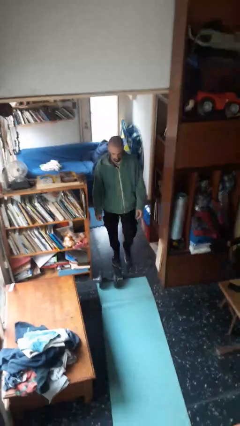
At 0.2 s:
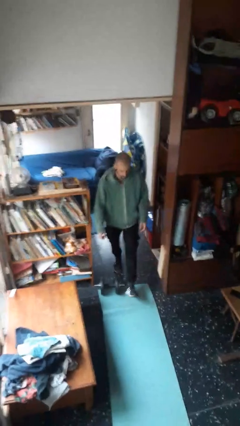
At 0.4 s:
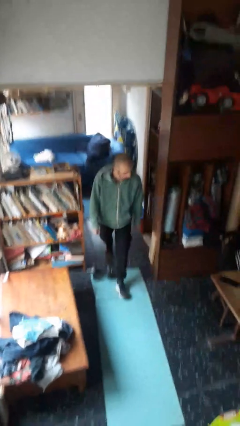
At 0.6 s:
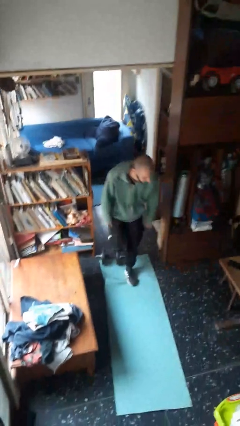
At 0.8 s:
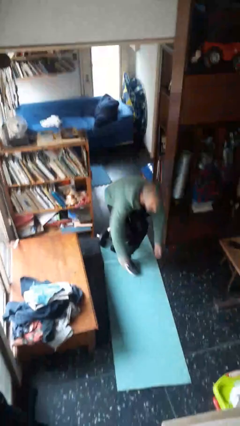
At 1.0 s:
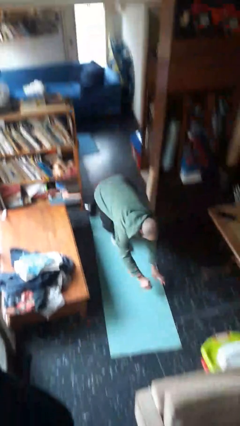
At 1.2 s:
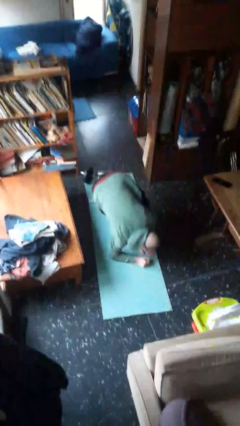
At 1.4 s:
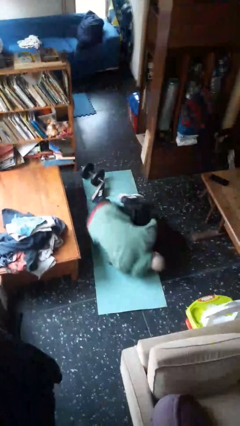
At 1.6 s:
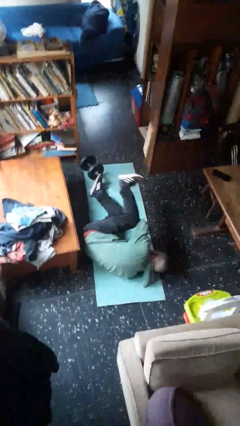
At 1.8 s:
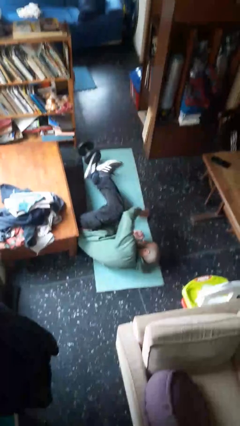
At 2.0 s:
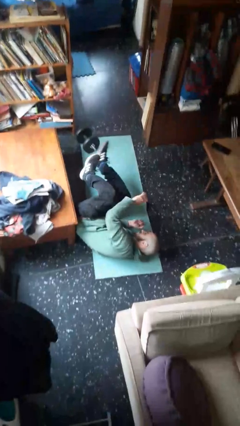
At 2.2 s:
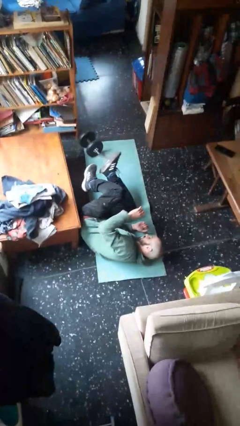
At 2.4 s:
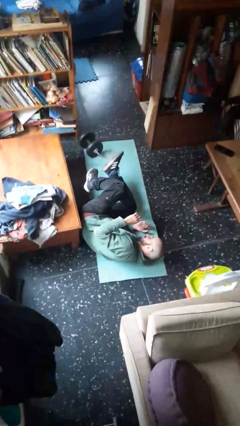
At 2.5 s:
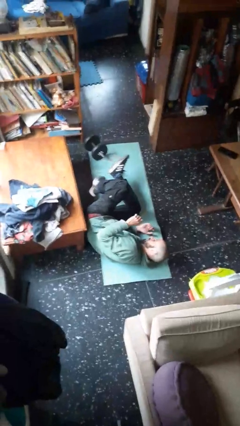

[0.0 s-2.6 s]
person trips on object on floor

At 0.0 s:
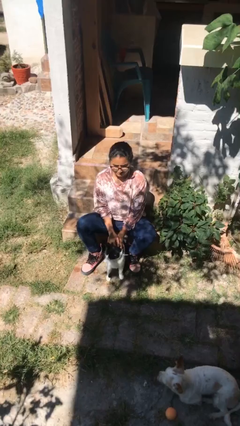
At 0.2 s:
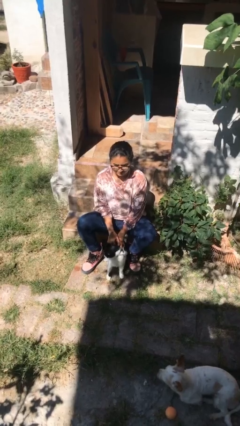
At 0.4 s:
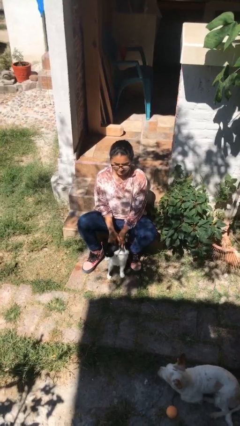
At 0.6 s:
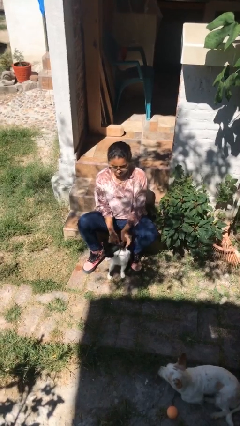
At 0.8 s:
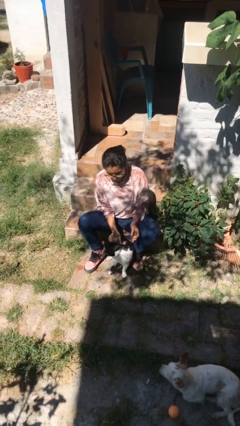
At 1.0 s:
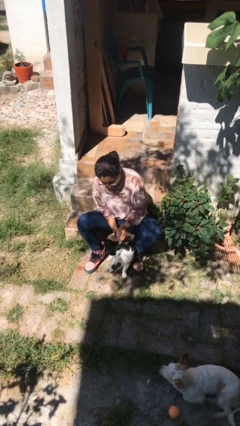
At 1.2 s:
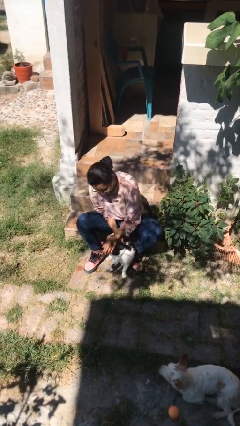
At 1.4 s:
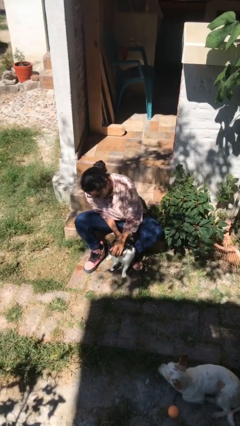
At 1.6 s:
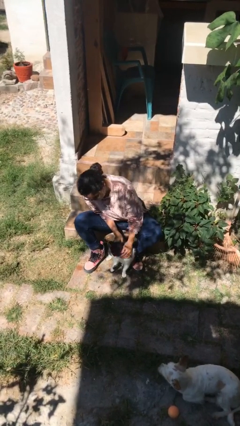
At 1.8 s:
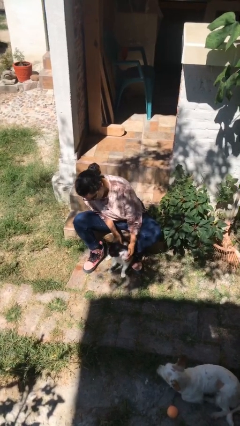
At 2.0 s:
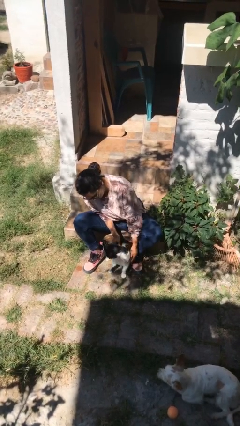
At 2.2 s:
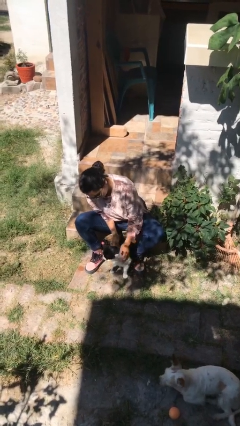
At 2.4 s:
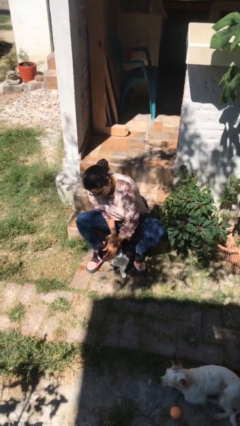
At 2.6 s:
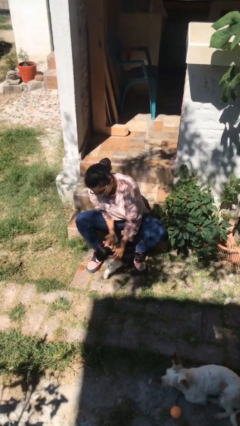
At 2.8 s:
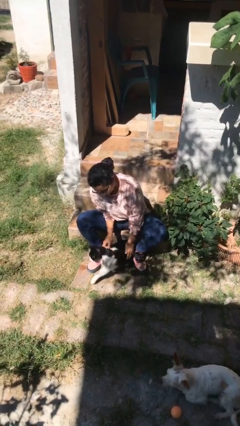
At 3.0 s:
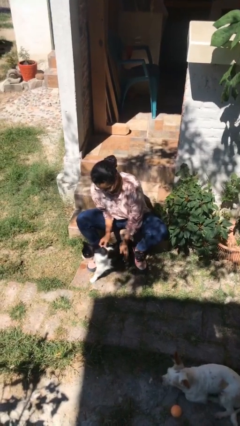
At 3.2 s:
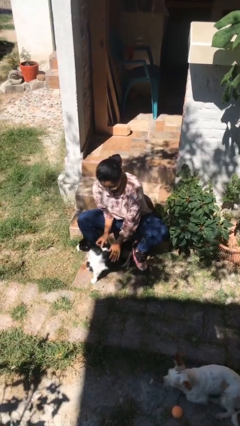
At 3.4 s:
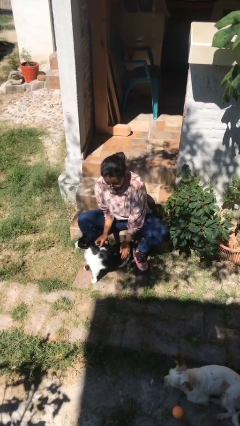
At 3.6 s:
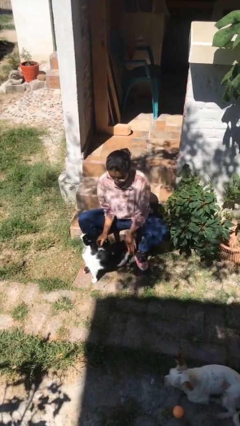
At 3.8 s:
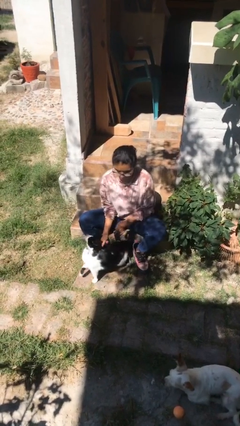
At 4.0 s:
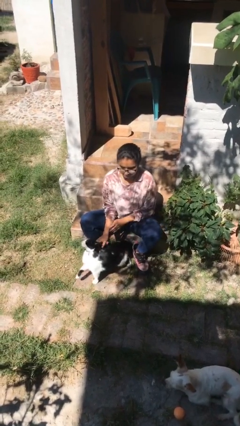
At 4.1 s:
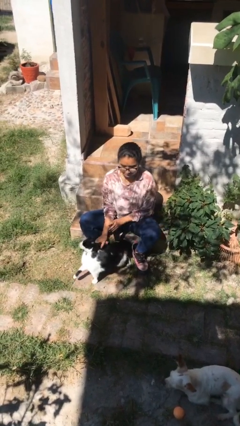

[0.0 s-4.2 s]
person pets cat

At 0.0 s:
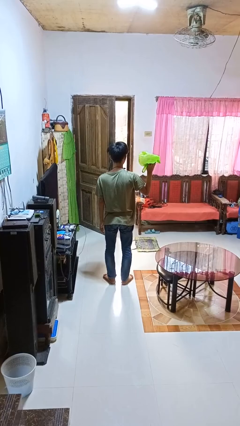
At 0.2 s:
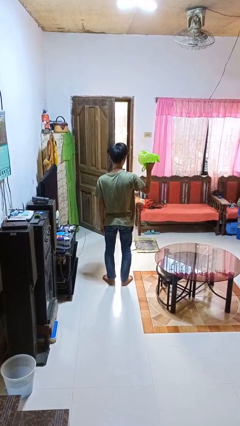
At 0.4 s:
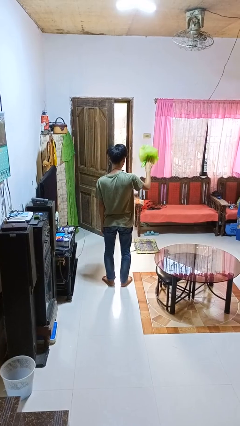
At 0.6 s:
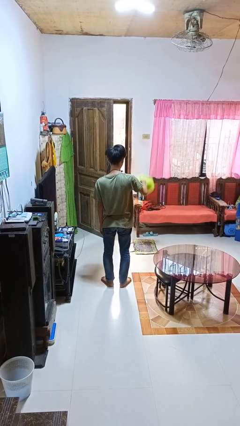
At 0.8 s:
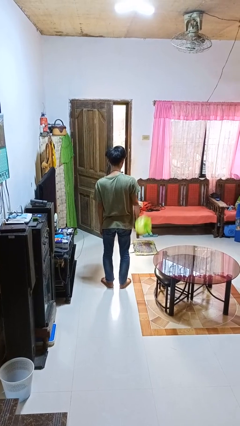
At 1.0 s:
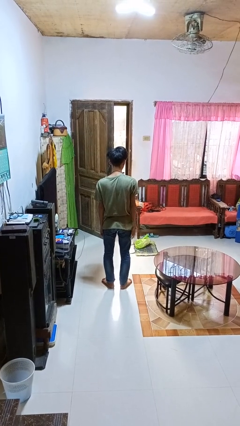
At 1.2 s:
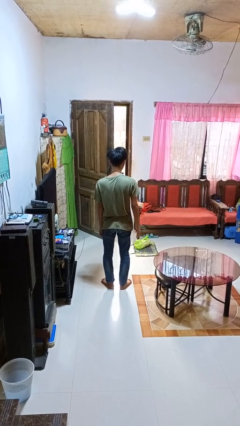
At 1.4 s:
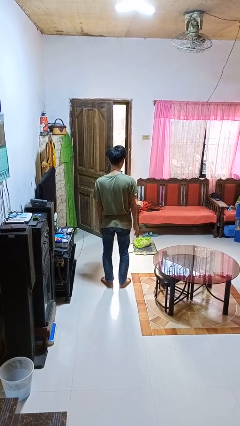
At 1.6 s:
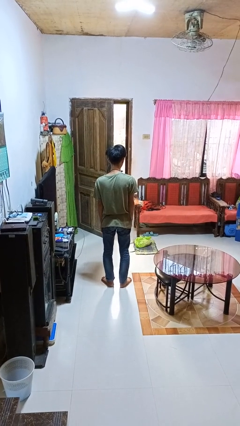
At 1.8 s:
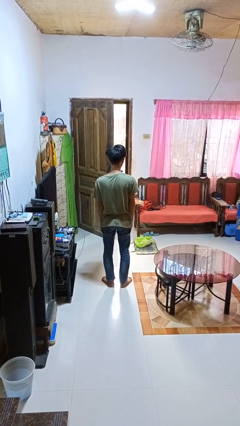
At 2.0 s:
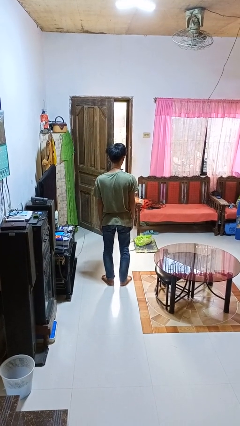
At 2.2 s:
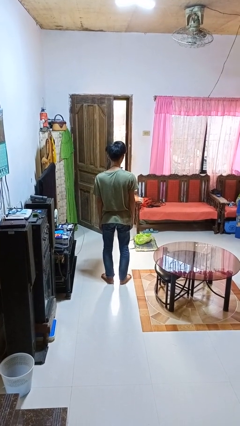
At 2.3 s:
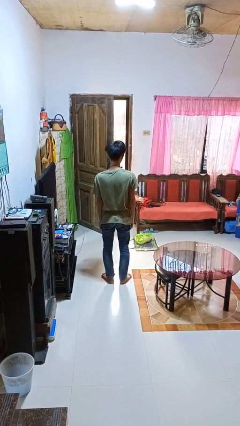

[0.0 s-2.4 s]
person throws object to ground

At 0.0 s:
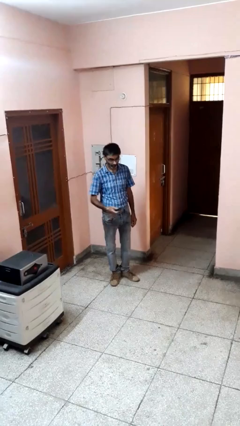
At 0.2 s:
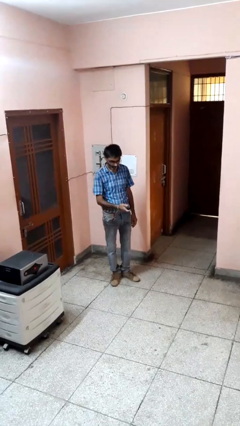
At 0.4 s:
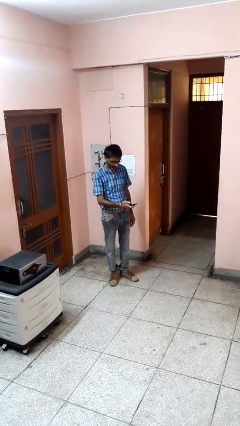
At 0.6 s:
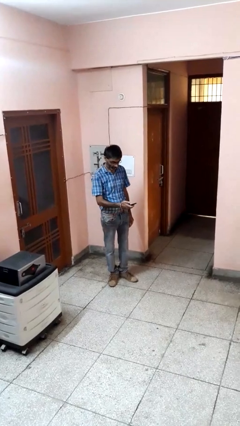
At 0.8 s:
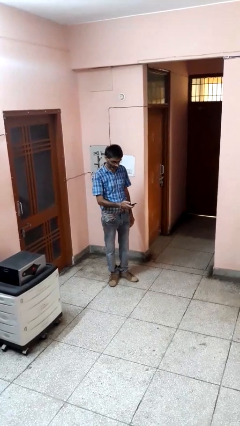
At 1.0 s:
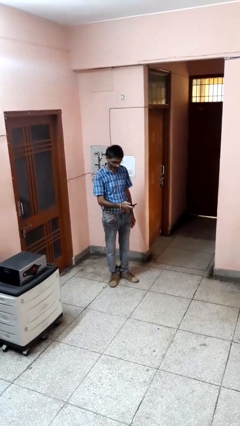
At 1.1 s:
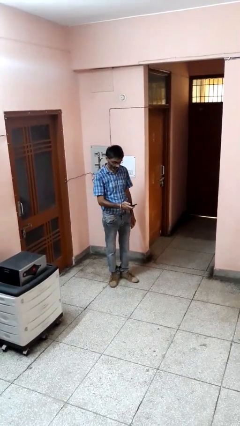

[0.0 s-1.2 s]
person takes phone from pocket

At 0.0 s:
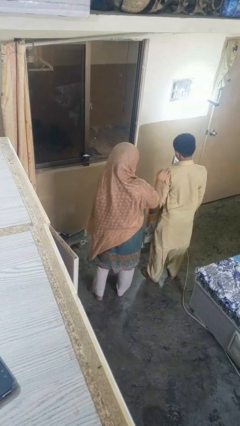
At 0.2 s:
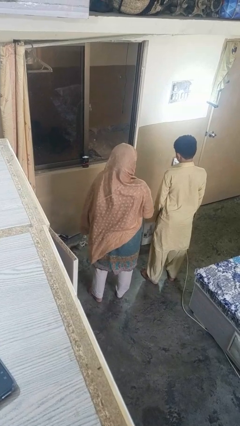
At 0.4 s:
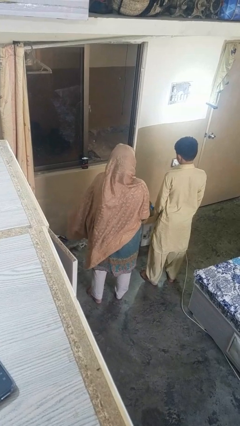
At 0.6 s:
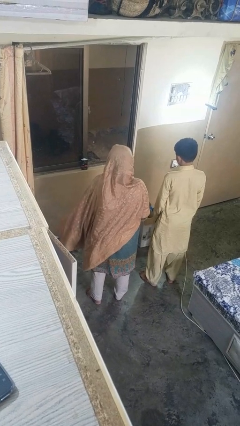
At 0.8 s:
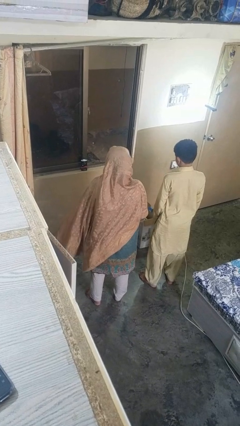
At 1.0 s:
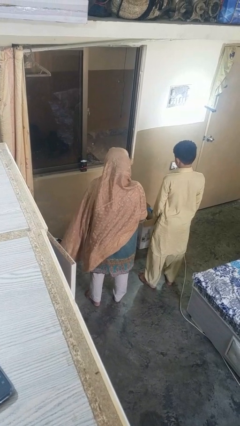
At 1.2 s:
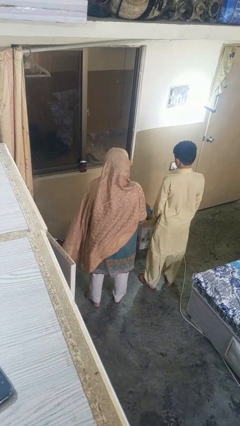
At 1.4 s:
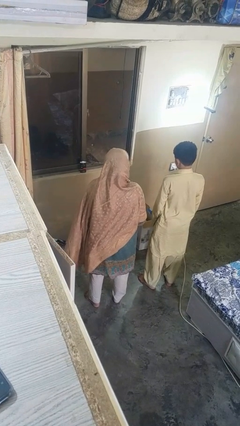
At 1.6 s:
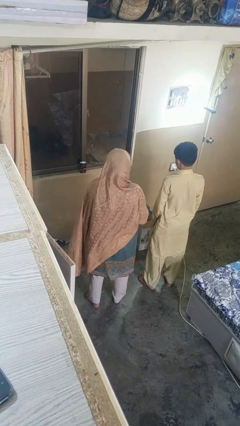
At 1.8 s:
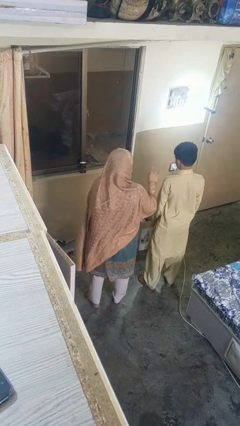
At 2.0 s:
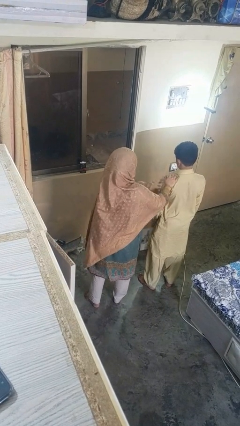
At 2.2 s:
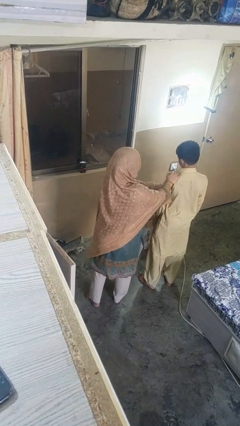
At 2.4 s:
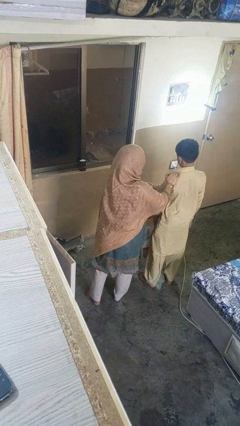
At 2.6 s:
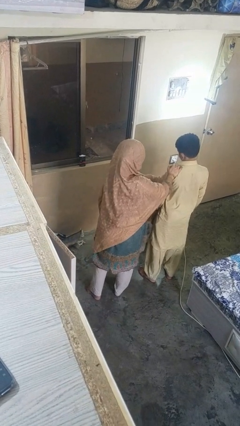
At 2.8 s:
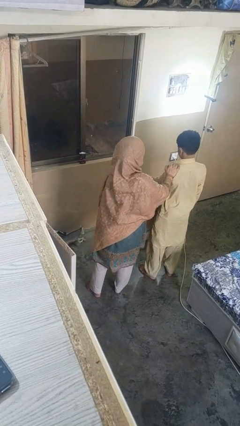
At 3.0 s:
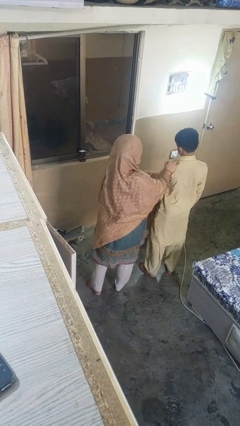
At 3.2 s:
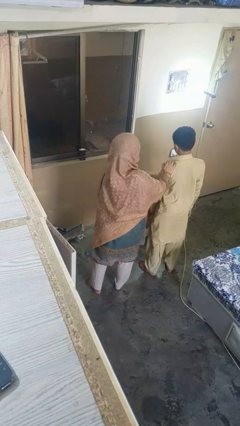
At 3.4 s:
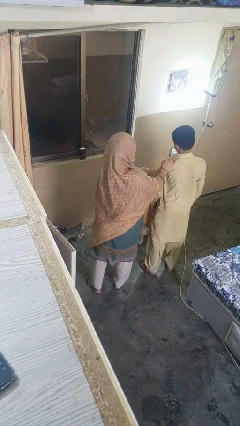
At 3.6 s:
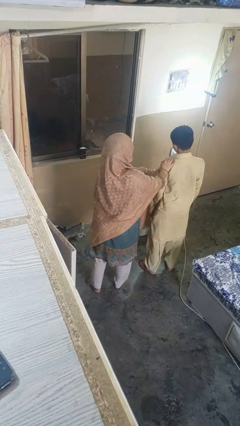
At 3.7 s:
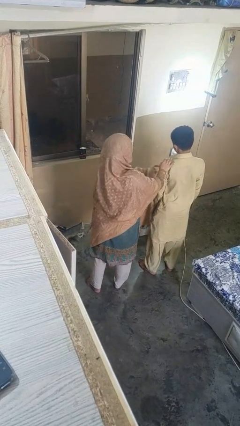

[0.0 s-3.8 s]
person shoves person

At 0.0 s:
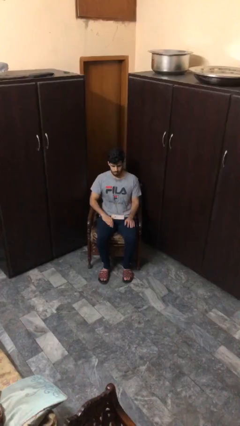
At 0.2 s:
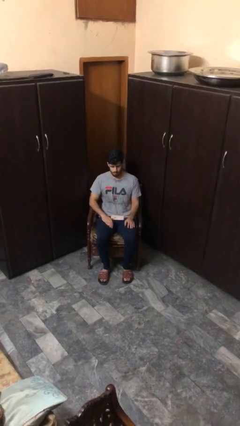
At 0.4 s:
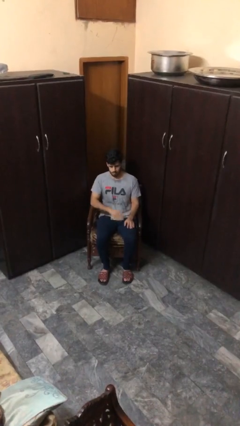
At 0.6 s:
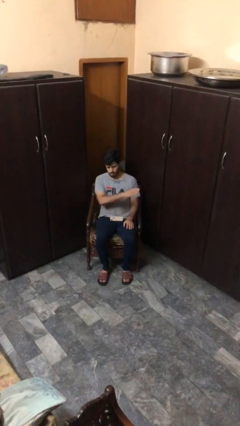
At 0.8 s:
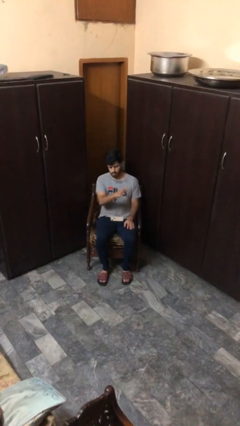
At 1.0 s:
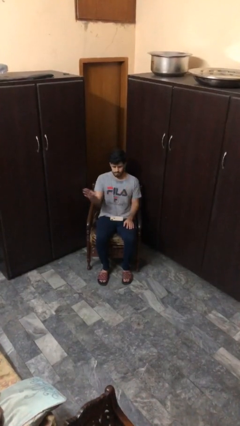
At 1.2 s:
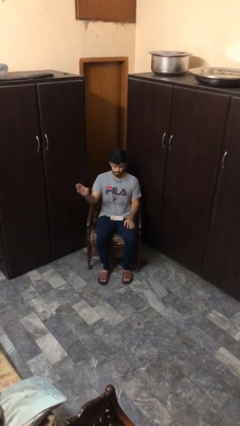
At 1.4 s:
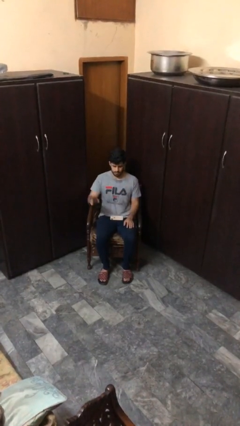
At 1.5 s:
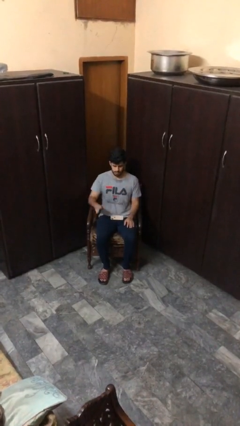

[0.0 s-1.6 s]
person gestures swipe right

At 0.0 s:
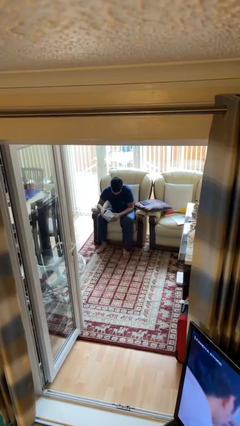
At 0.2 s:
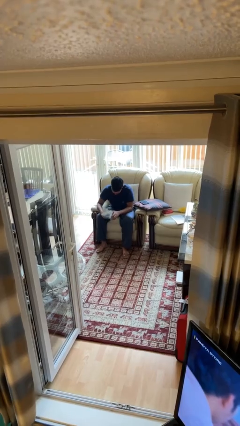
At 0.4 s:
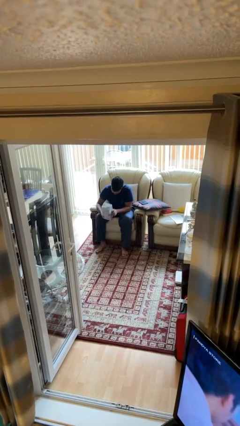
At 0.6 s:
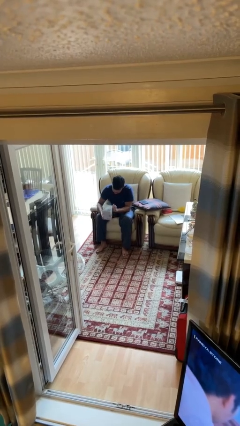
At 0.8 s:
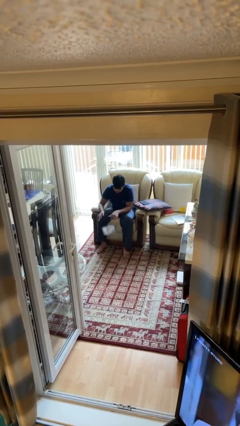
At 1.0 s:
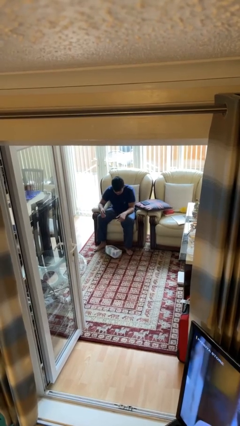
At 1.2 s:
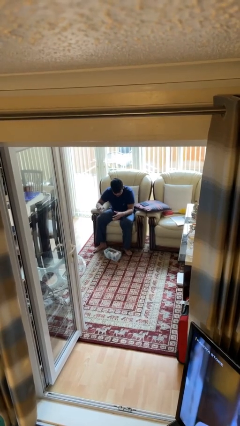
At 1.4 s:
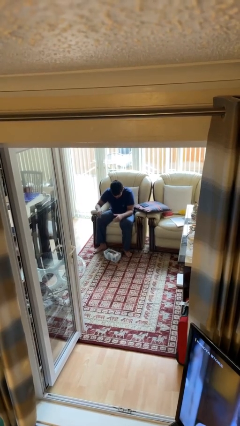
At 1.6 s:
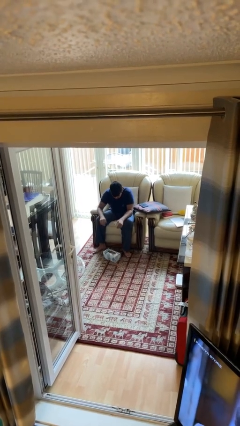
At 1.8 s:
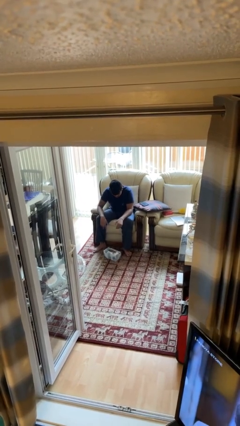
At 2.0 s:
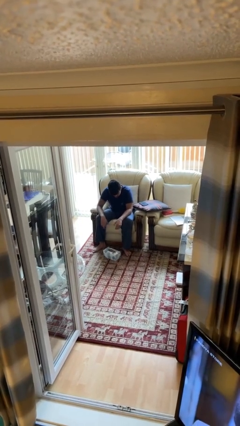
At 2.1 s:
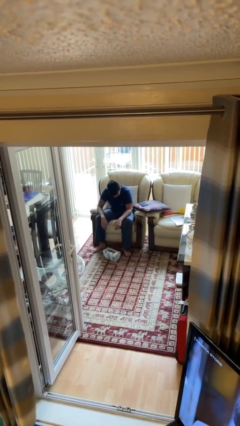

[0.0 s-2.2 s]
person drops object
